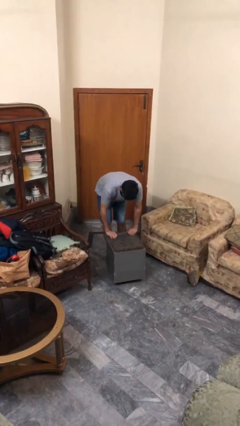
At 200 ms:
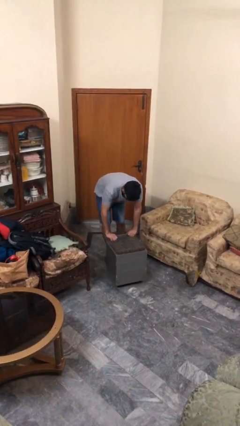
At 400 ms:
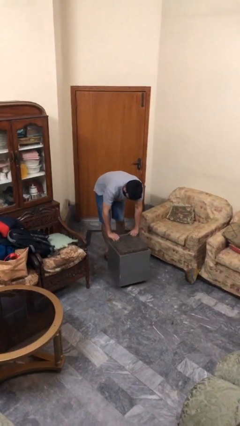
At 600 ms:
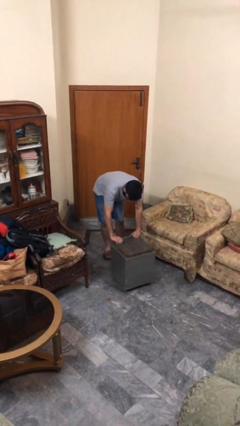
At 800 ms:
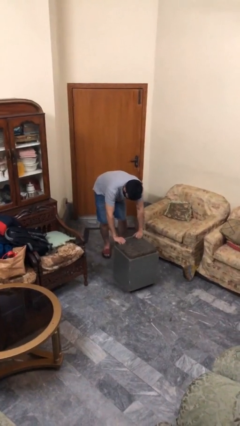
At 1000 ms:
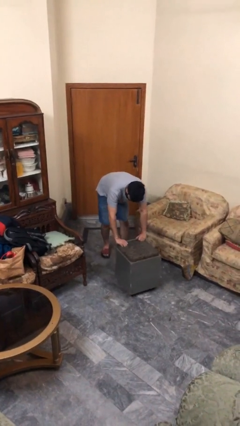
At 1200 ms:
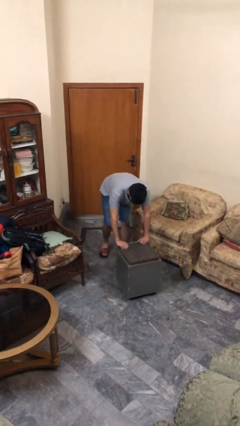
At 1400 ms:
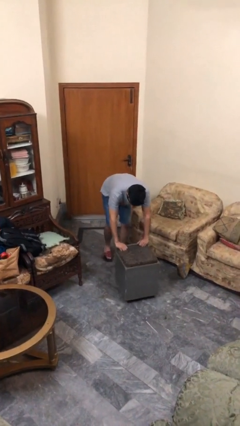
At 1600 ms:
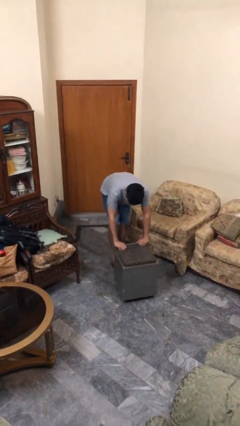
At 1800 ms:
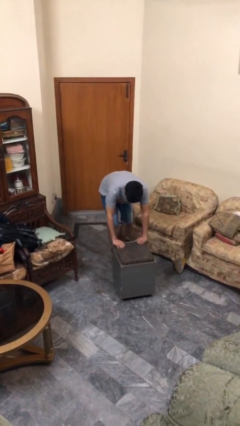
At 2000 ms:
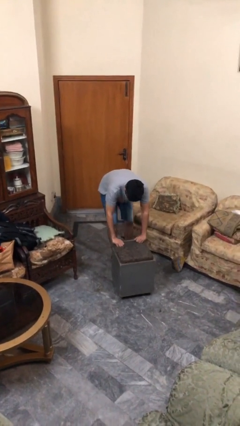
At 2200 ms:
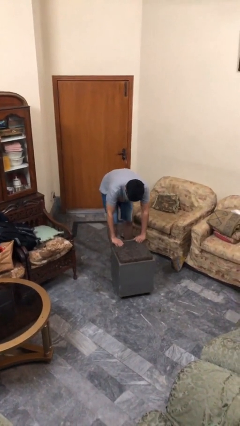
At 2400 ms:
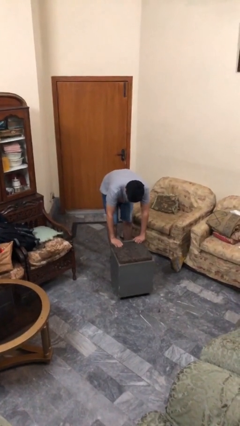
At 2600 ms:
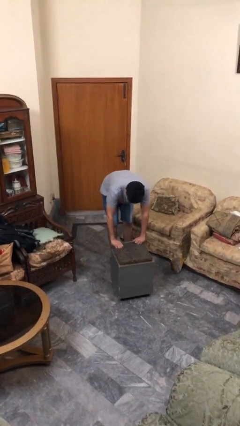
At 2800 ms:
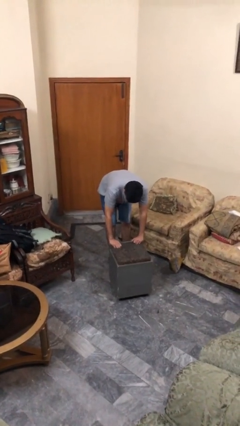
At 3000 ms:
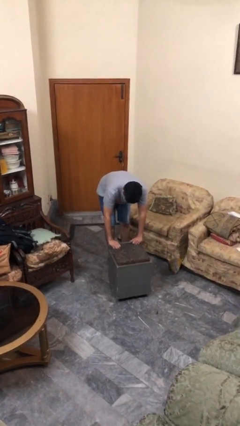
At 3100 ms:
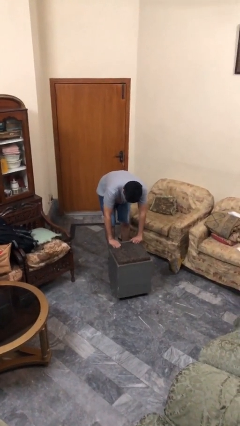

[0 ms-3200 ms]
person pushes wheeled cart

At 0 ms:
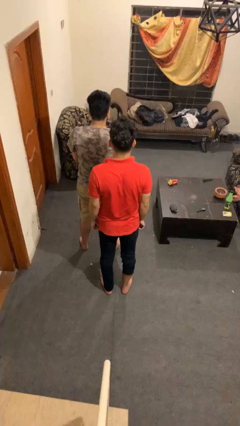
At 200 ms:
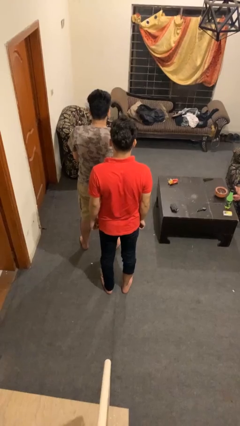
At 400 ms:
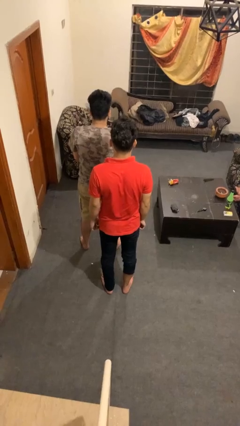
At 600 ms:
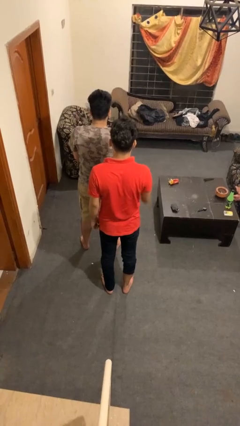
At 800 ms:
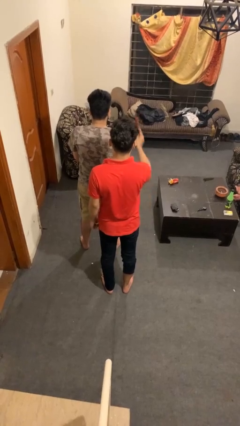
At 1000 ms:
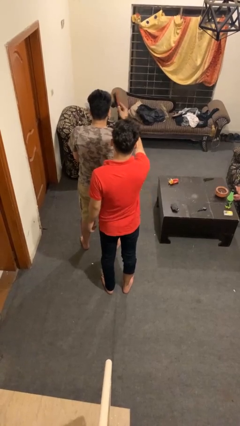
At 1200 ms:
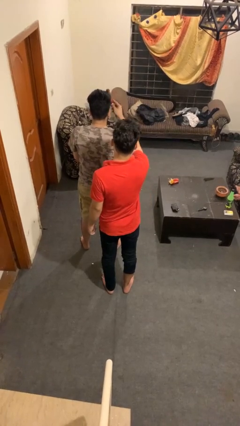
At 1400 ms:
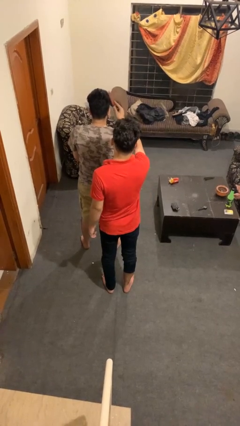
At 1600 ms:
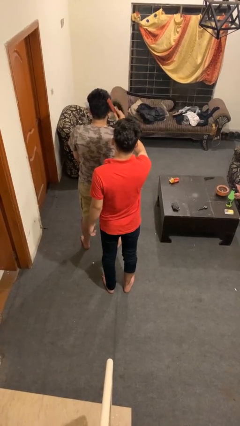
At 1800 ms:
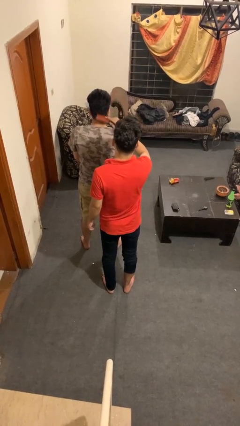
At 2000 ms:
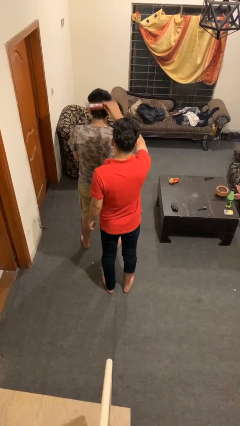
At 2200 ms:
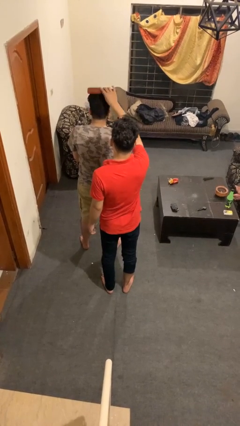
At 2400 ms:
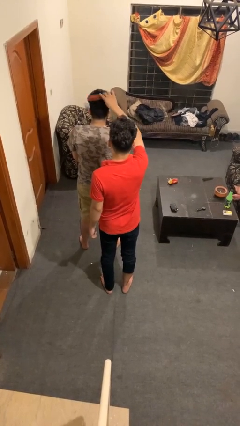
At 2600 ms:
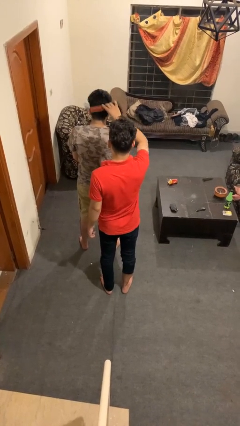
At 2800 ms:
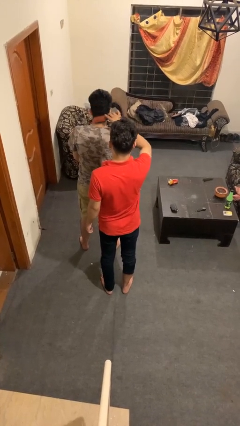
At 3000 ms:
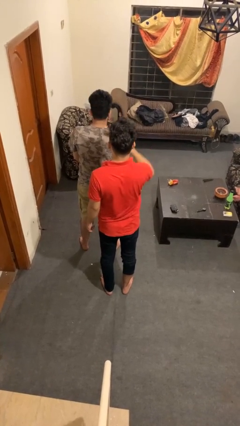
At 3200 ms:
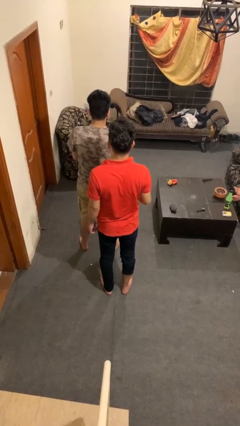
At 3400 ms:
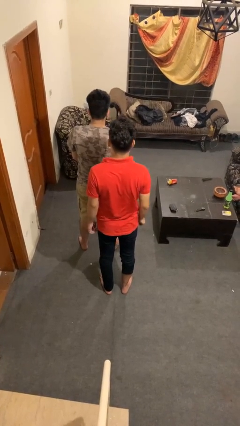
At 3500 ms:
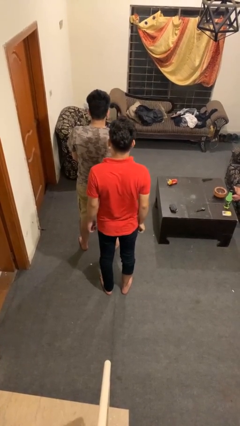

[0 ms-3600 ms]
person brushes hair of person

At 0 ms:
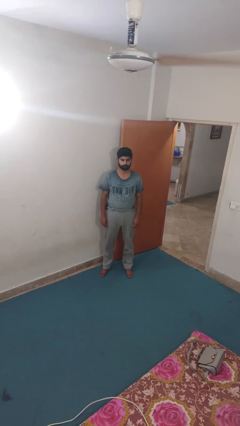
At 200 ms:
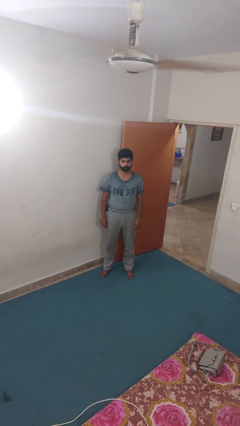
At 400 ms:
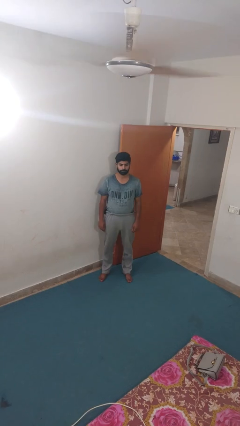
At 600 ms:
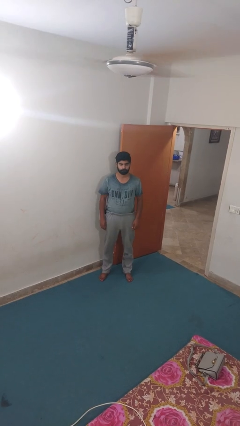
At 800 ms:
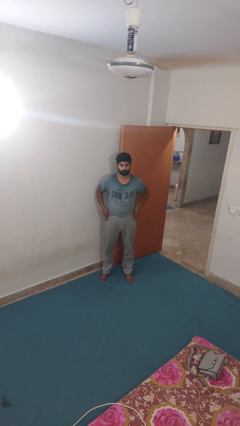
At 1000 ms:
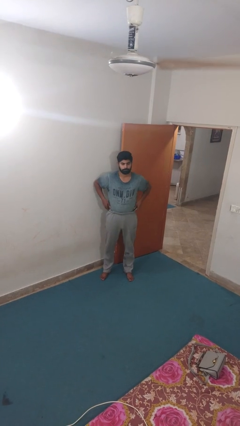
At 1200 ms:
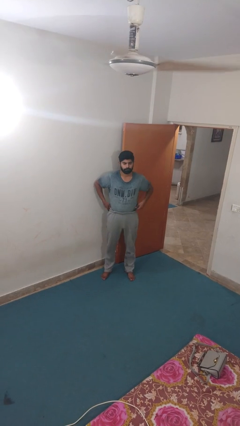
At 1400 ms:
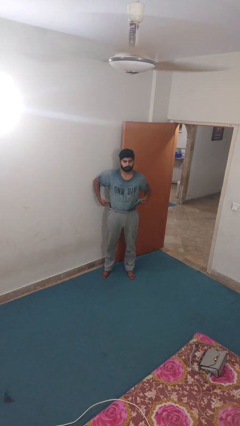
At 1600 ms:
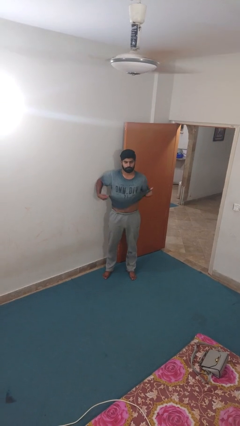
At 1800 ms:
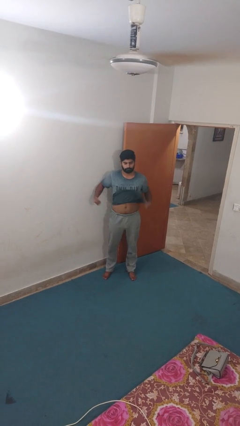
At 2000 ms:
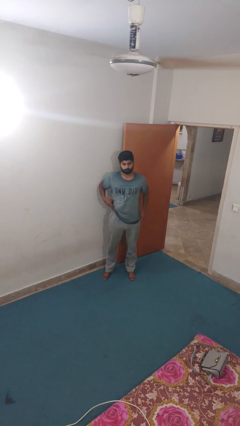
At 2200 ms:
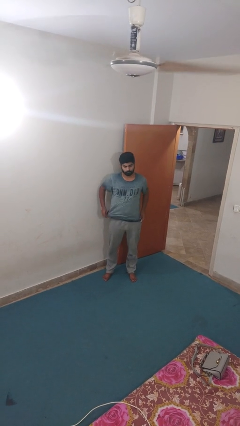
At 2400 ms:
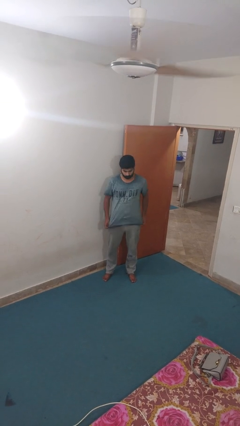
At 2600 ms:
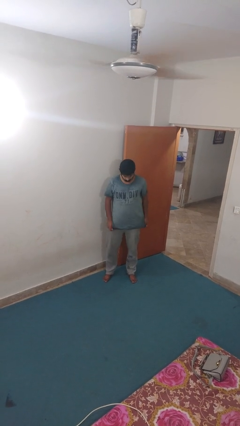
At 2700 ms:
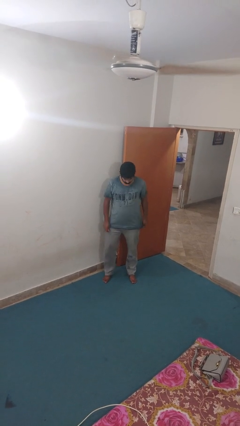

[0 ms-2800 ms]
person untucks shirt

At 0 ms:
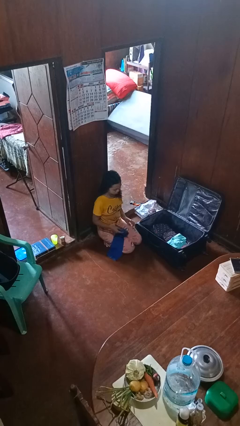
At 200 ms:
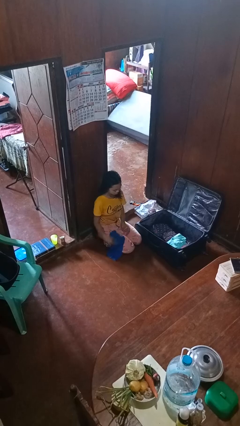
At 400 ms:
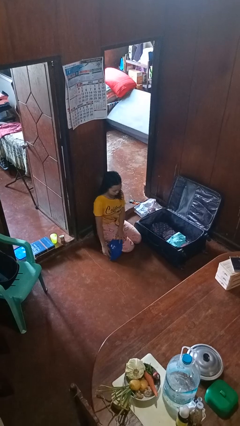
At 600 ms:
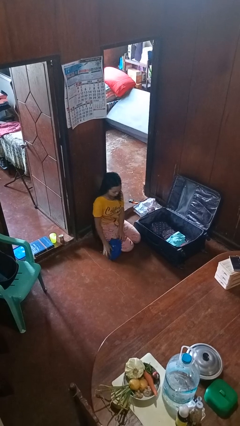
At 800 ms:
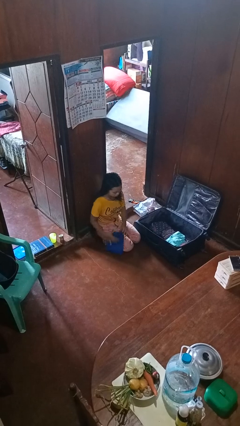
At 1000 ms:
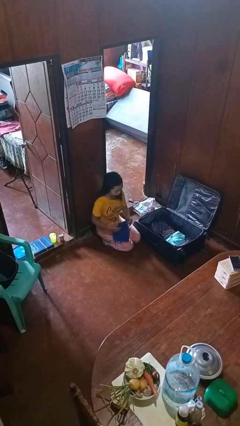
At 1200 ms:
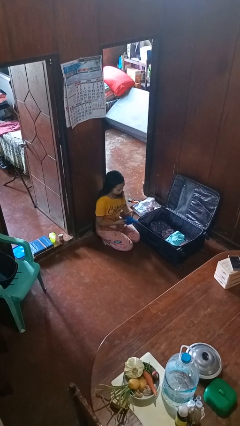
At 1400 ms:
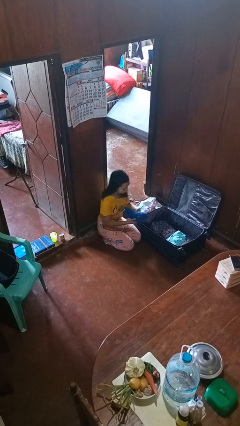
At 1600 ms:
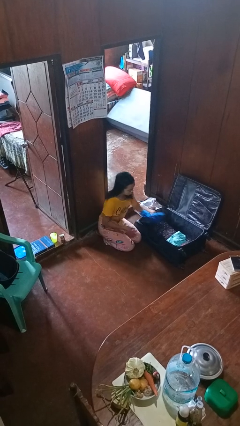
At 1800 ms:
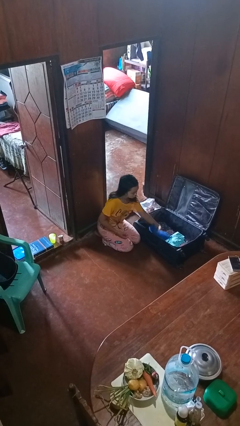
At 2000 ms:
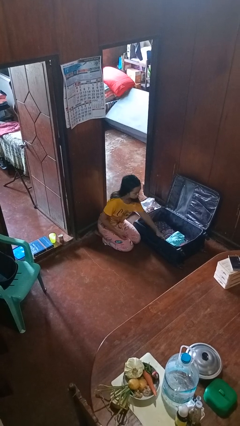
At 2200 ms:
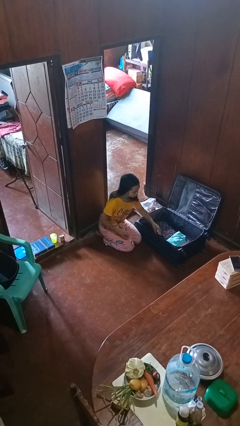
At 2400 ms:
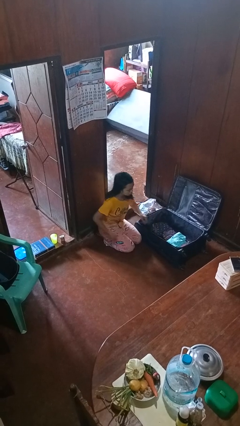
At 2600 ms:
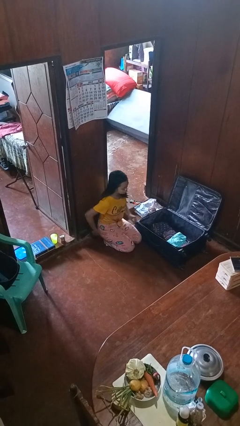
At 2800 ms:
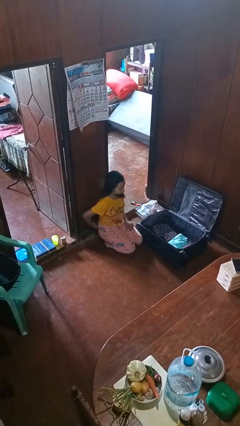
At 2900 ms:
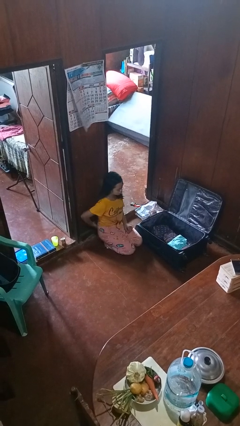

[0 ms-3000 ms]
person loads clothes into suitcase

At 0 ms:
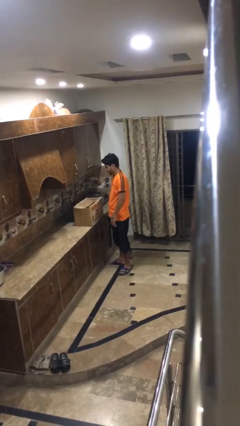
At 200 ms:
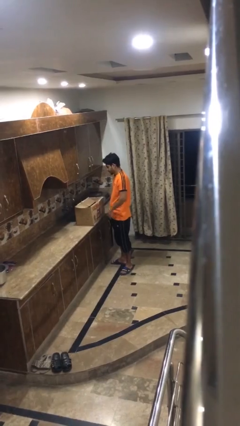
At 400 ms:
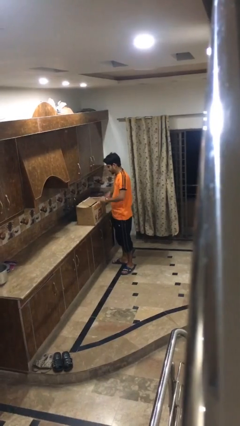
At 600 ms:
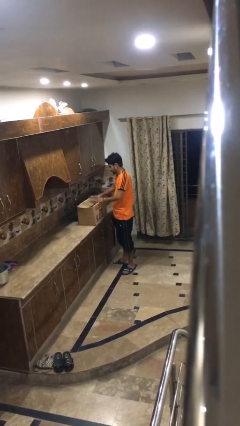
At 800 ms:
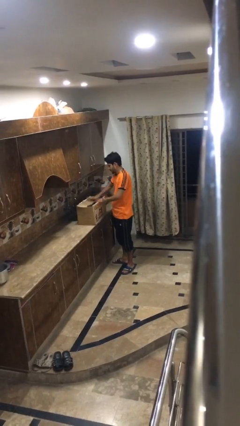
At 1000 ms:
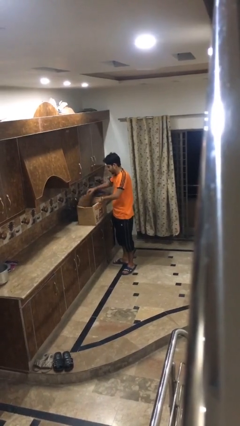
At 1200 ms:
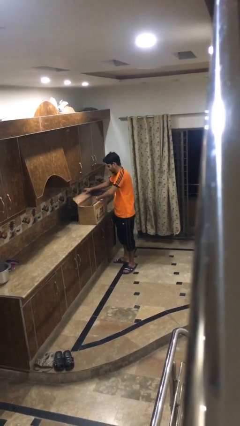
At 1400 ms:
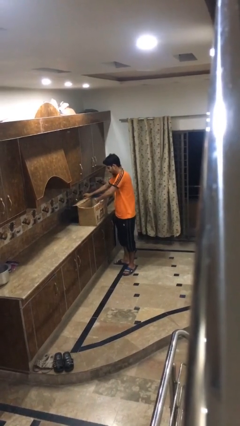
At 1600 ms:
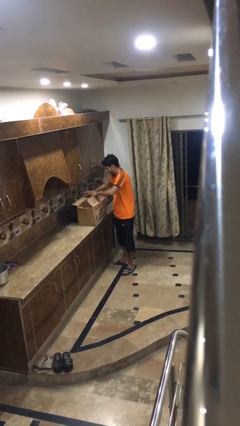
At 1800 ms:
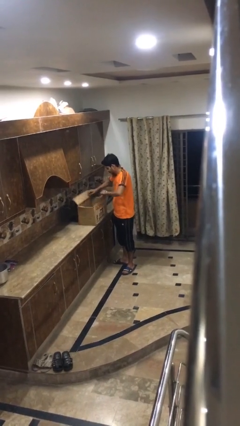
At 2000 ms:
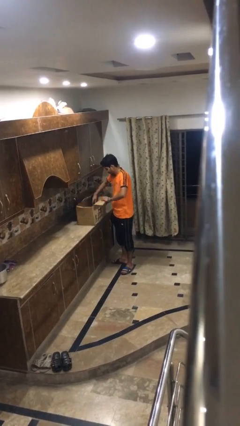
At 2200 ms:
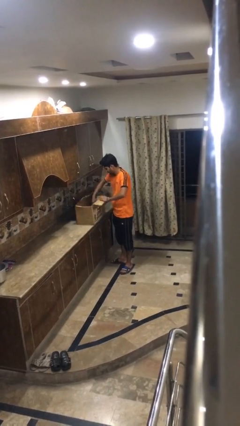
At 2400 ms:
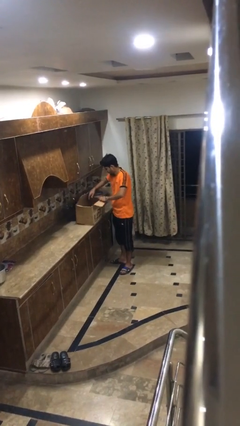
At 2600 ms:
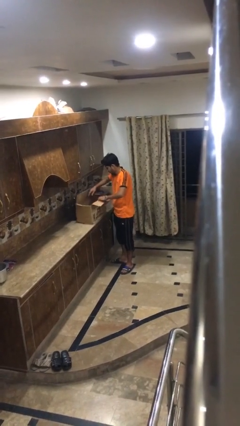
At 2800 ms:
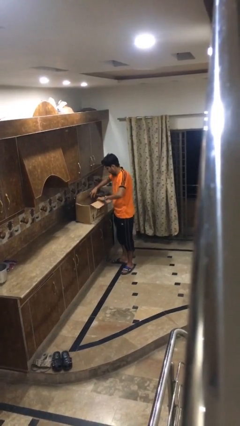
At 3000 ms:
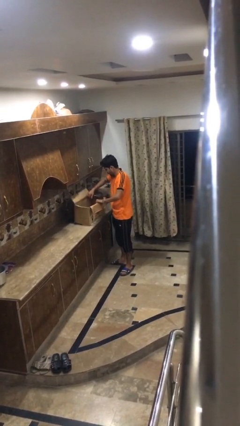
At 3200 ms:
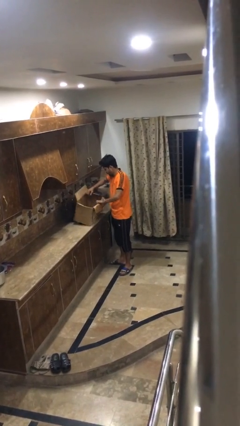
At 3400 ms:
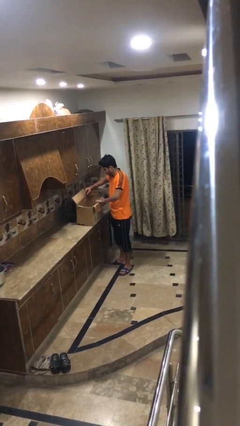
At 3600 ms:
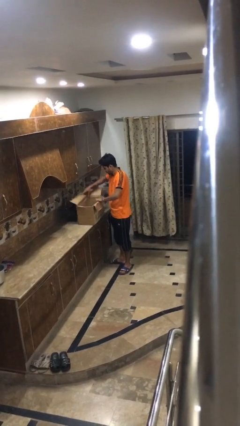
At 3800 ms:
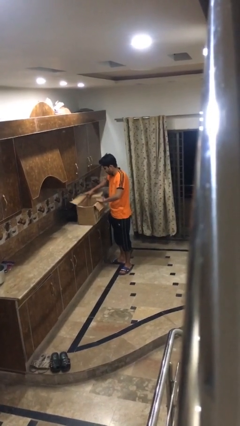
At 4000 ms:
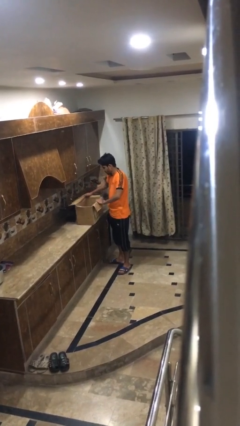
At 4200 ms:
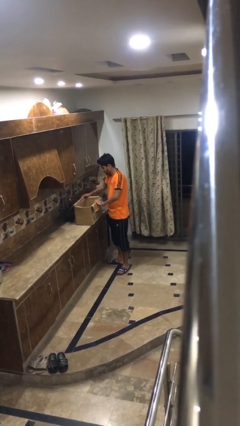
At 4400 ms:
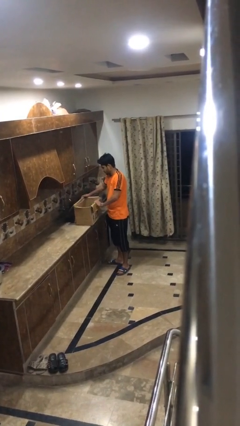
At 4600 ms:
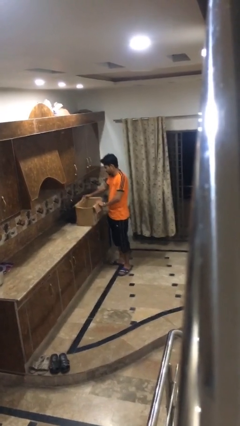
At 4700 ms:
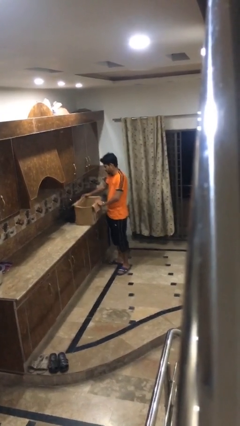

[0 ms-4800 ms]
person opens box
